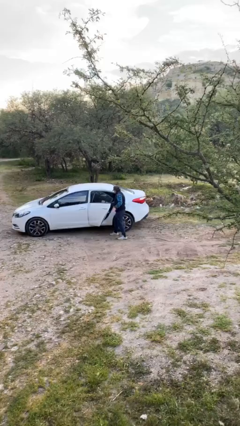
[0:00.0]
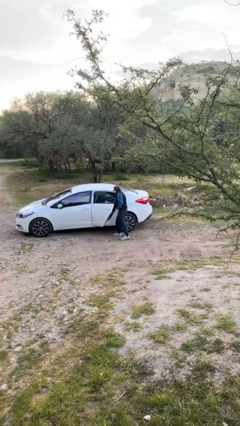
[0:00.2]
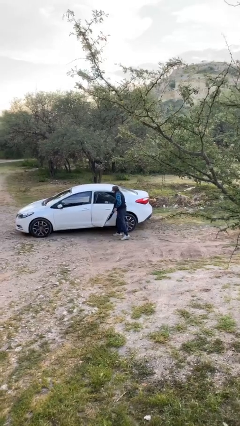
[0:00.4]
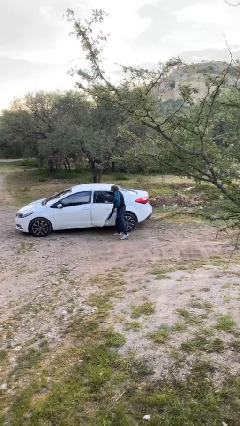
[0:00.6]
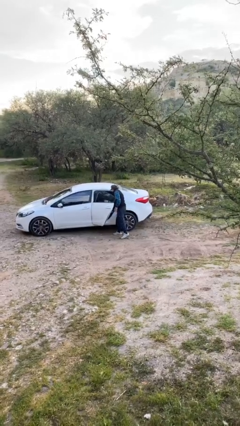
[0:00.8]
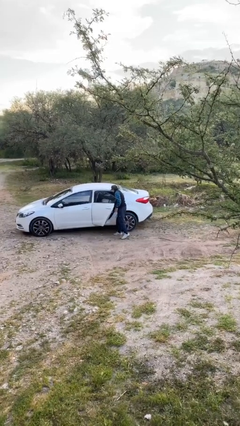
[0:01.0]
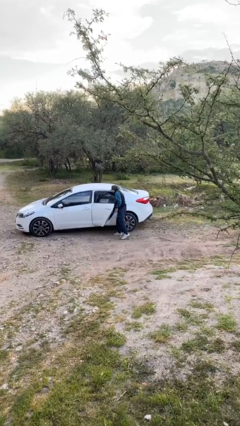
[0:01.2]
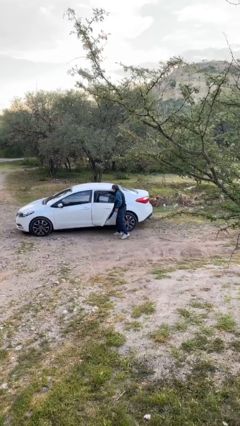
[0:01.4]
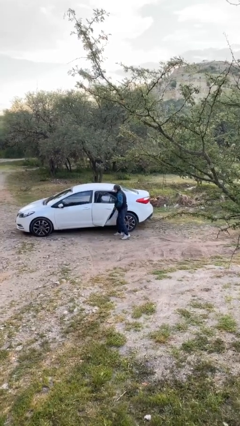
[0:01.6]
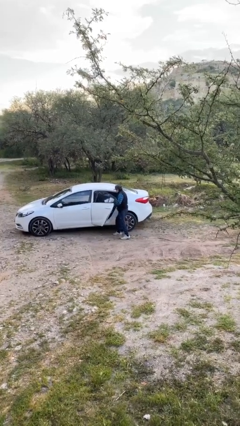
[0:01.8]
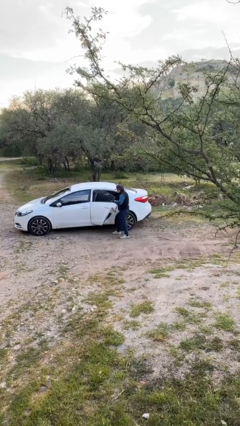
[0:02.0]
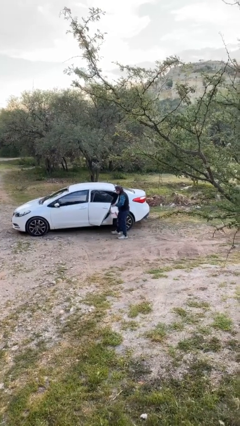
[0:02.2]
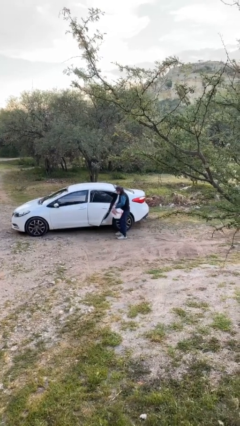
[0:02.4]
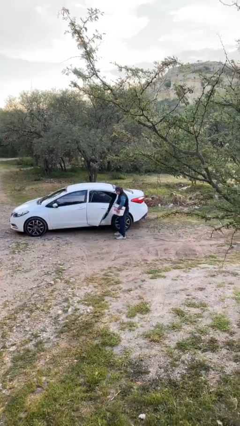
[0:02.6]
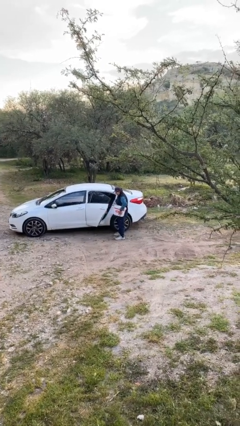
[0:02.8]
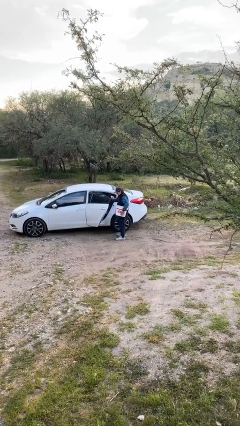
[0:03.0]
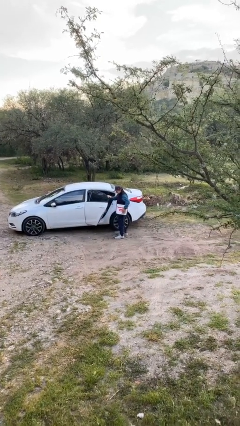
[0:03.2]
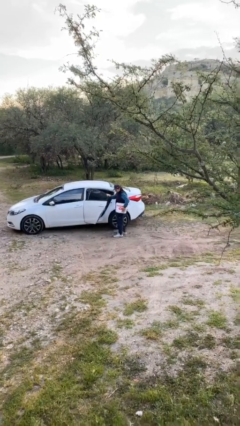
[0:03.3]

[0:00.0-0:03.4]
person unloads car

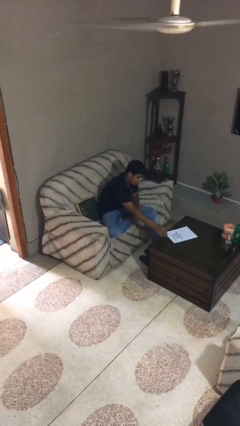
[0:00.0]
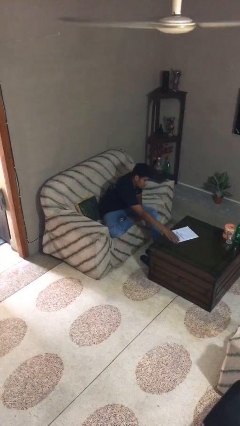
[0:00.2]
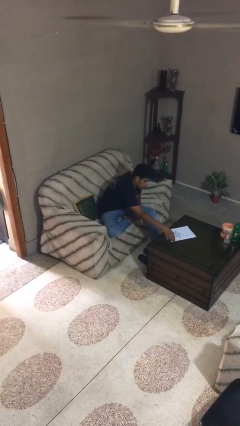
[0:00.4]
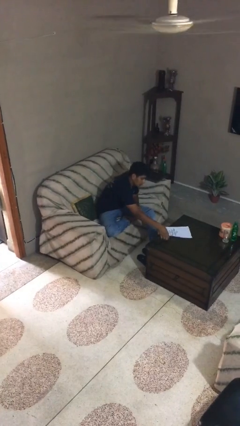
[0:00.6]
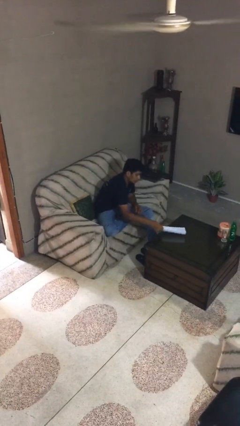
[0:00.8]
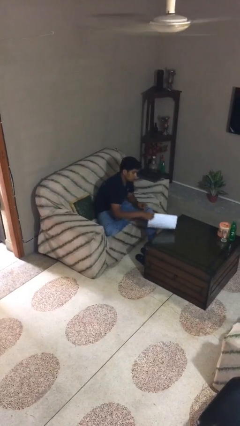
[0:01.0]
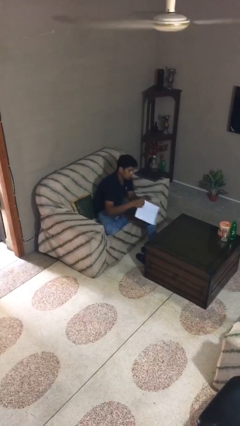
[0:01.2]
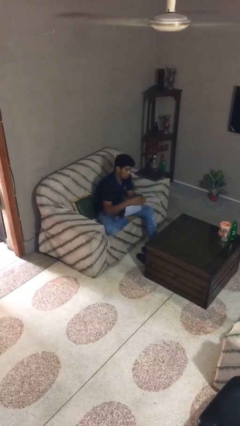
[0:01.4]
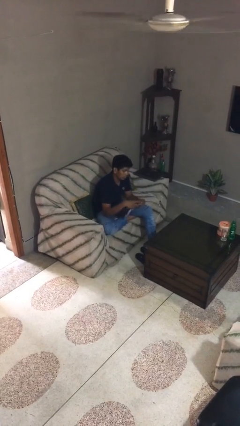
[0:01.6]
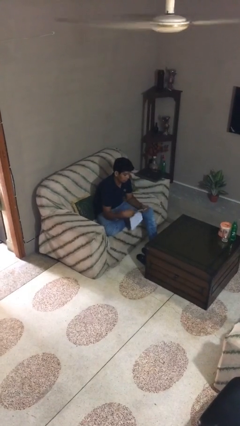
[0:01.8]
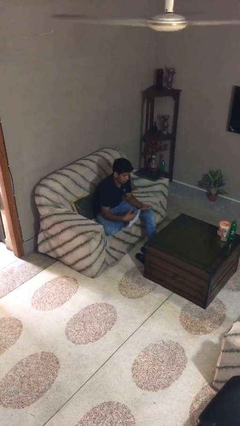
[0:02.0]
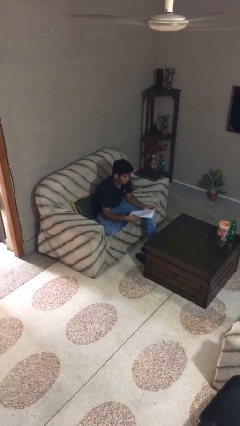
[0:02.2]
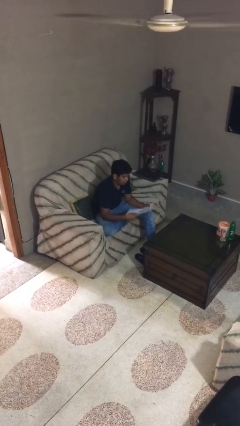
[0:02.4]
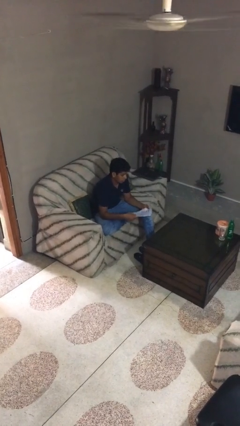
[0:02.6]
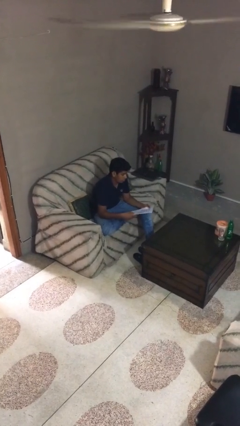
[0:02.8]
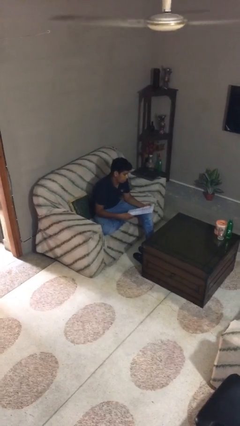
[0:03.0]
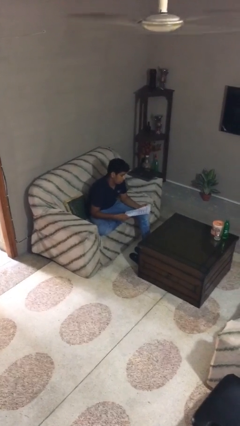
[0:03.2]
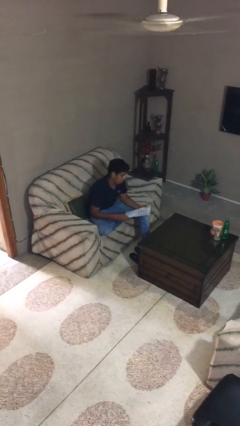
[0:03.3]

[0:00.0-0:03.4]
person picks up object from table

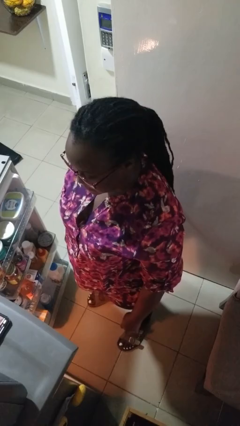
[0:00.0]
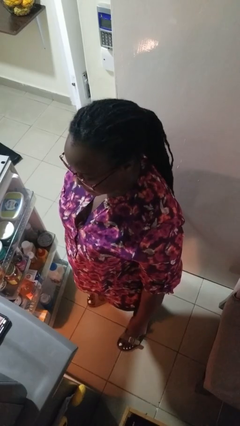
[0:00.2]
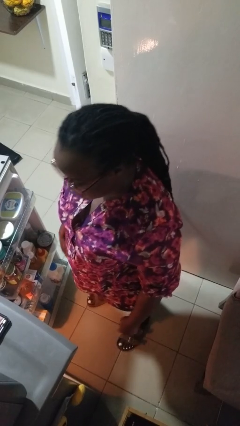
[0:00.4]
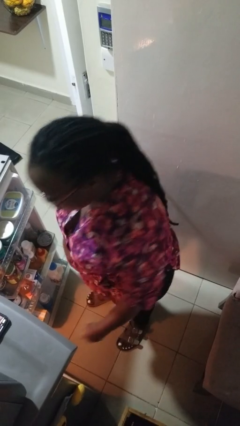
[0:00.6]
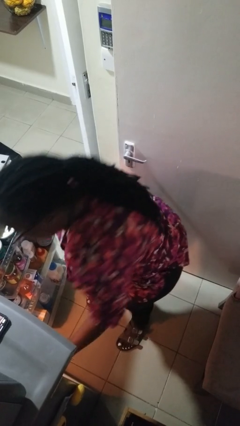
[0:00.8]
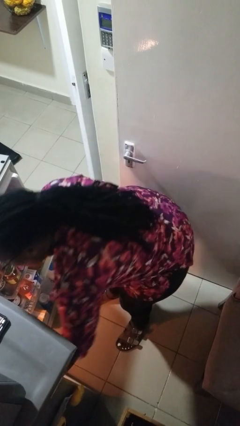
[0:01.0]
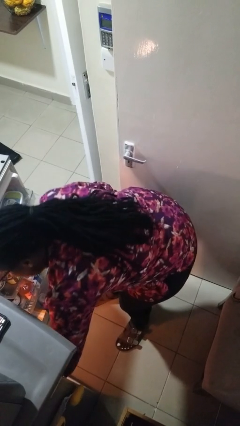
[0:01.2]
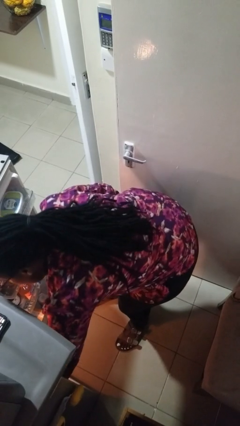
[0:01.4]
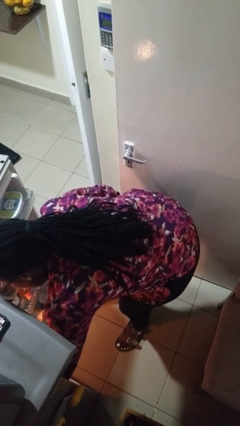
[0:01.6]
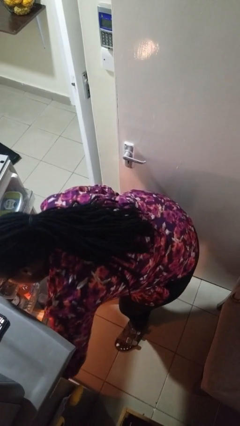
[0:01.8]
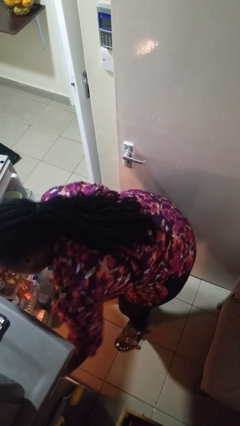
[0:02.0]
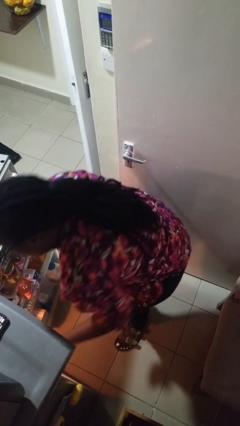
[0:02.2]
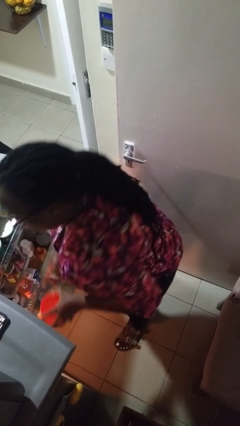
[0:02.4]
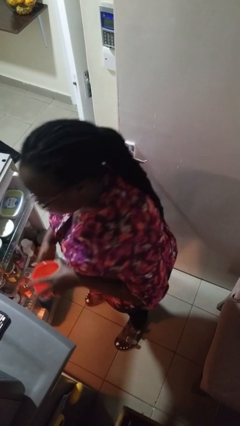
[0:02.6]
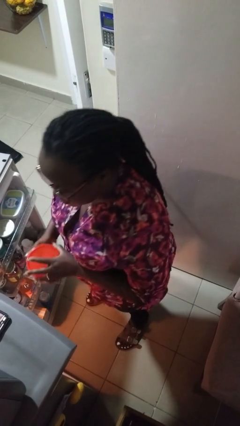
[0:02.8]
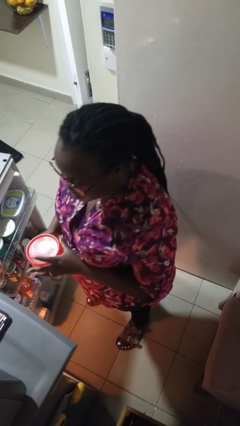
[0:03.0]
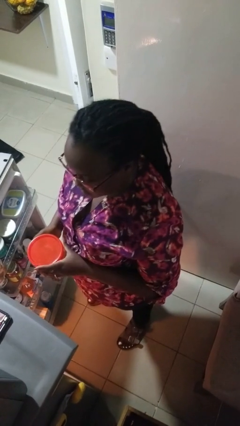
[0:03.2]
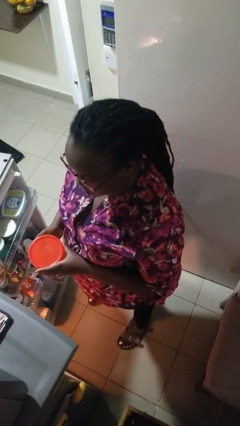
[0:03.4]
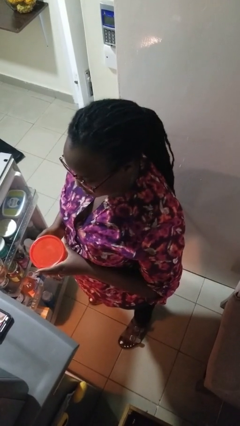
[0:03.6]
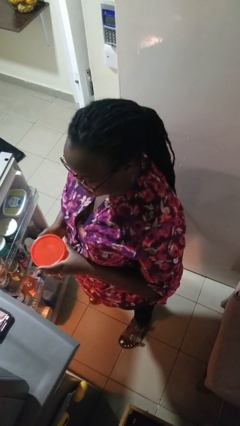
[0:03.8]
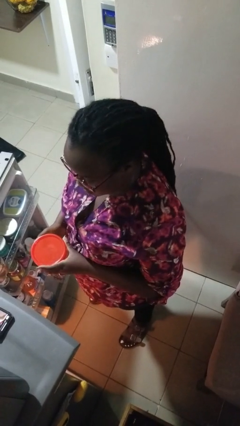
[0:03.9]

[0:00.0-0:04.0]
person takes object from refrigerator

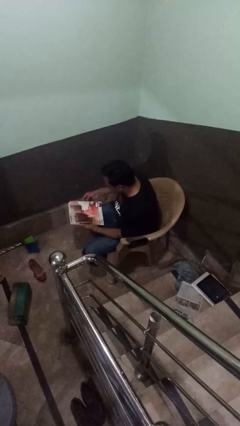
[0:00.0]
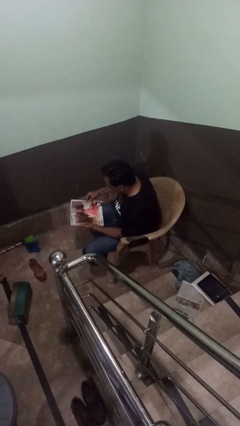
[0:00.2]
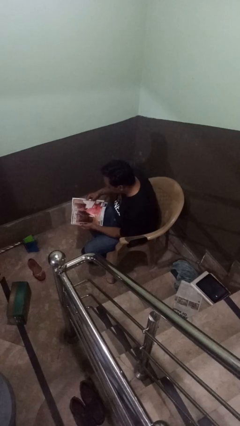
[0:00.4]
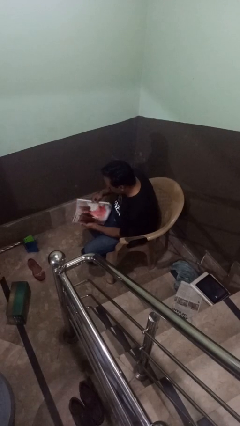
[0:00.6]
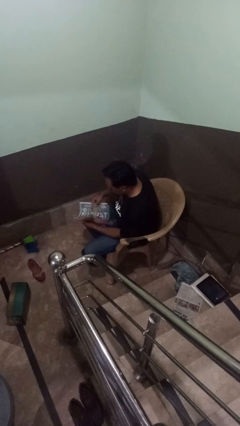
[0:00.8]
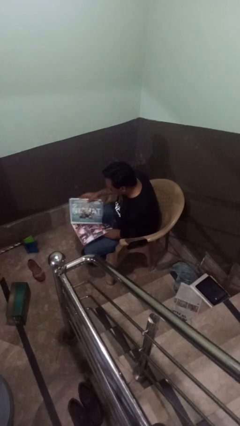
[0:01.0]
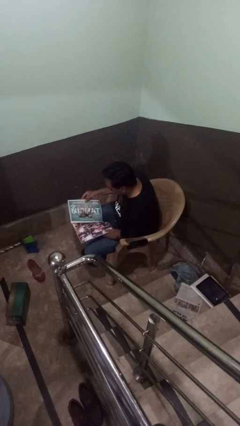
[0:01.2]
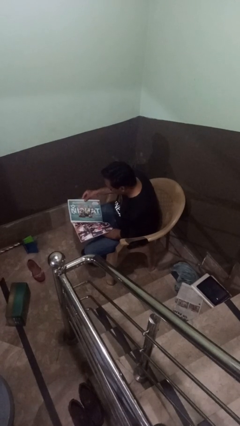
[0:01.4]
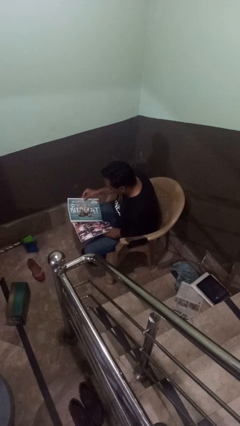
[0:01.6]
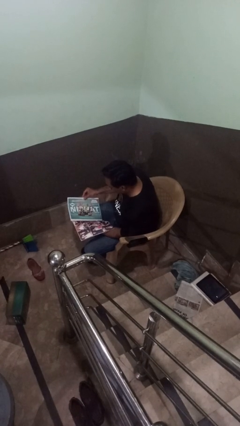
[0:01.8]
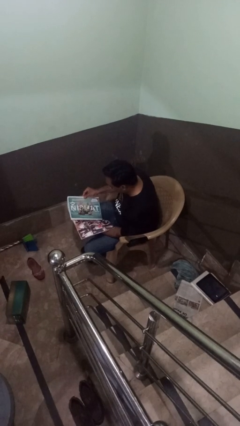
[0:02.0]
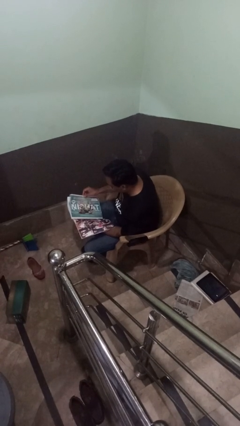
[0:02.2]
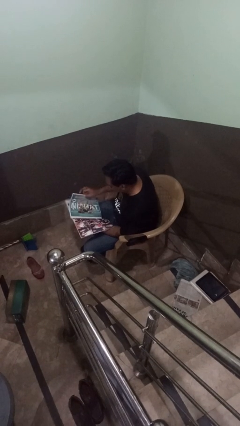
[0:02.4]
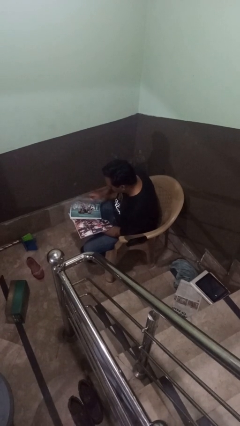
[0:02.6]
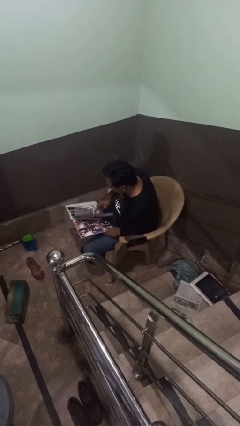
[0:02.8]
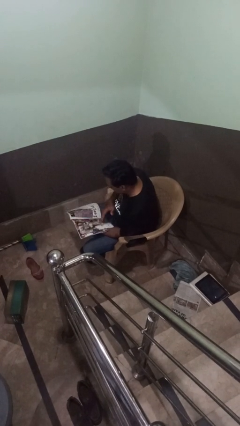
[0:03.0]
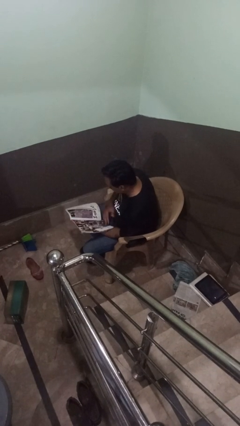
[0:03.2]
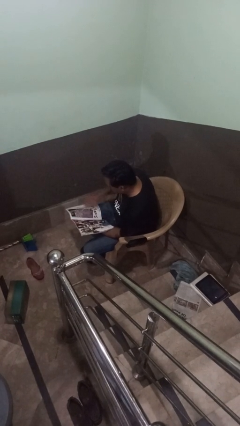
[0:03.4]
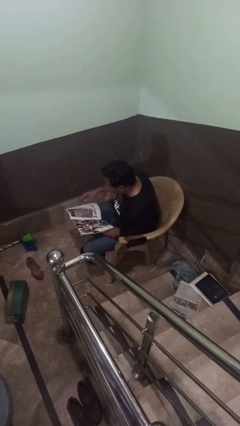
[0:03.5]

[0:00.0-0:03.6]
person reads magazine

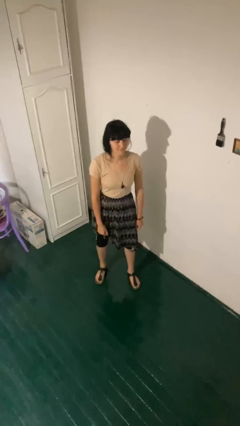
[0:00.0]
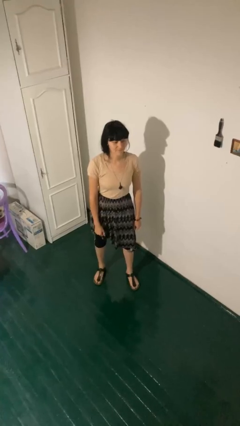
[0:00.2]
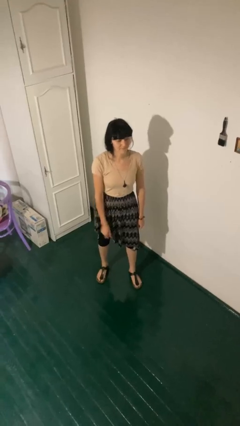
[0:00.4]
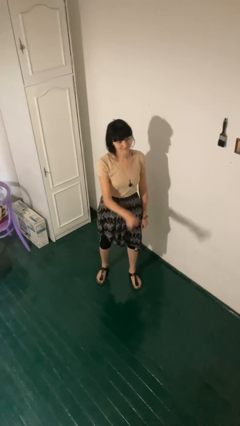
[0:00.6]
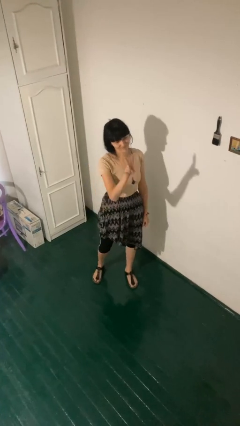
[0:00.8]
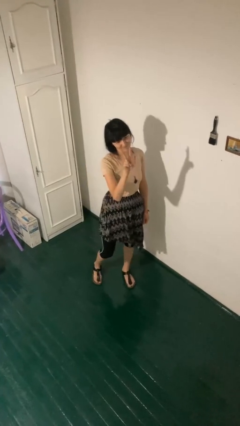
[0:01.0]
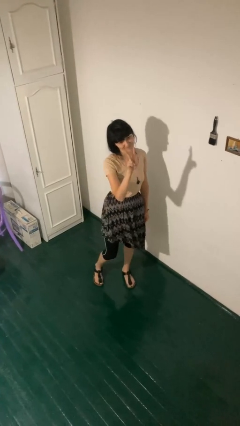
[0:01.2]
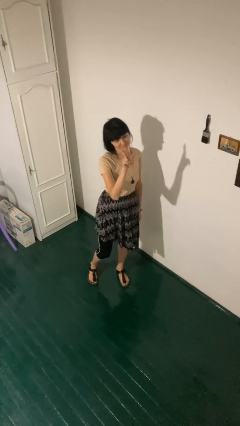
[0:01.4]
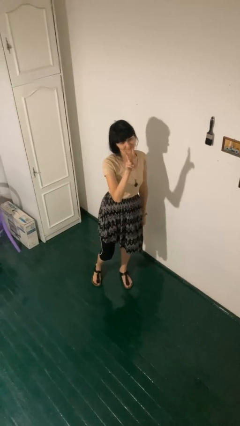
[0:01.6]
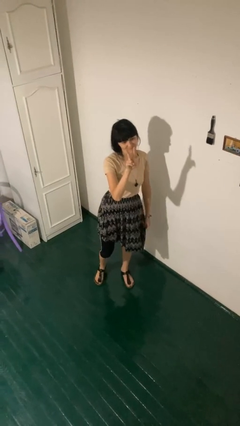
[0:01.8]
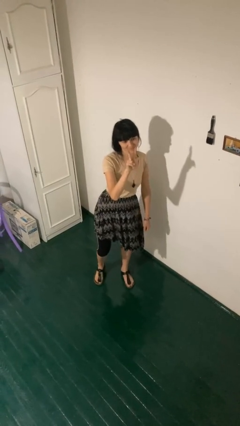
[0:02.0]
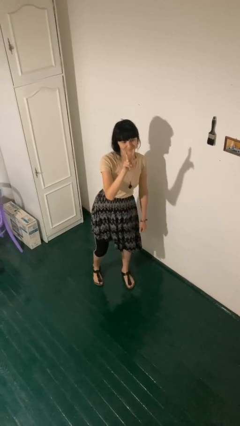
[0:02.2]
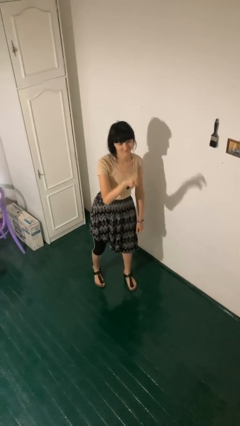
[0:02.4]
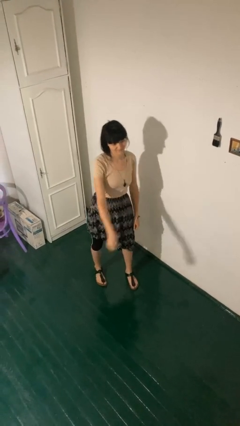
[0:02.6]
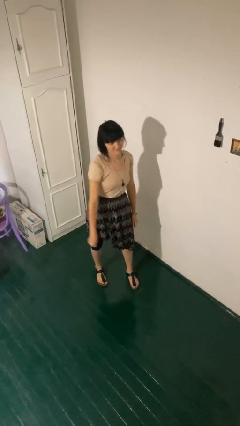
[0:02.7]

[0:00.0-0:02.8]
person gestures peace

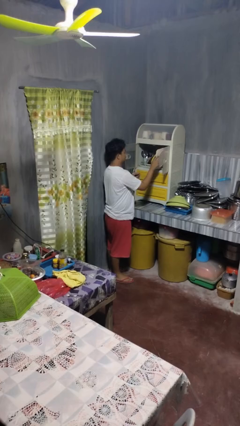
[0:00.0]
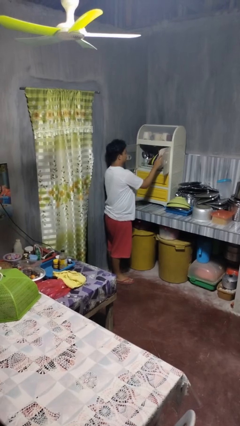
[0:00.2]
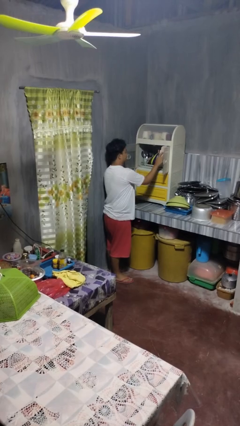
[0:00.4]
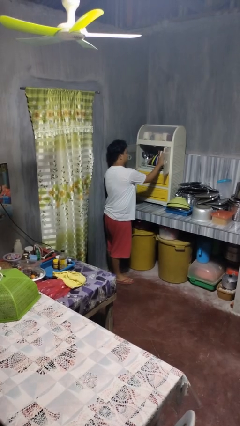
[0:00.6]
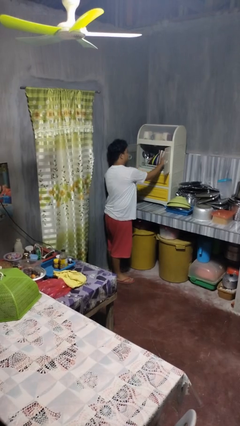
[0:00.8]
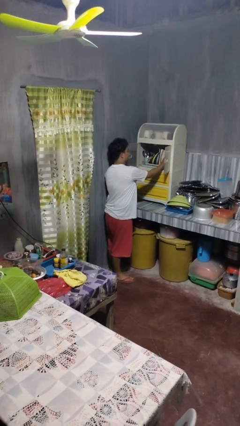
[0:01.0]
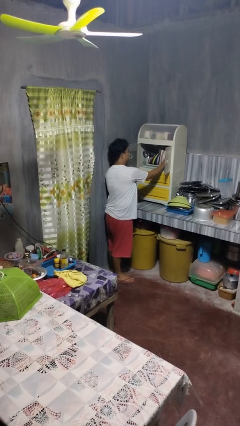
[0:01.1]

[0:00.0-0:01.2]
person puts down object into cabinet
